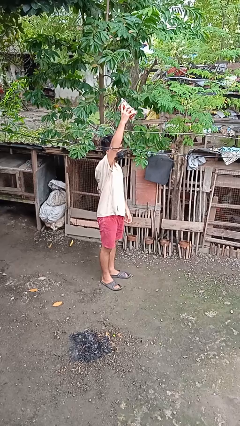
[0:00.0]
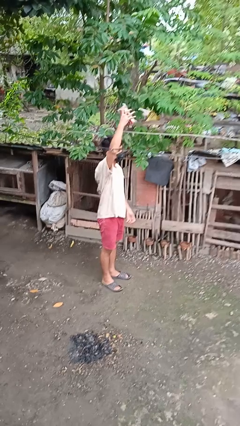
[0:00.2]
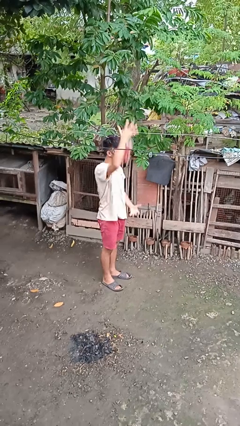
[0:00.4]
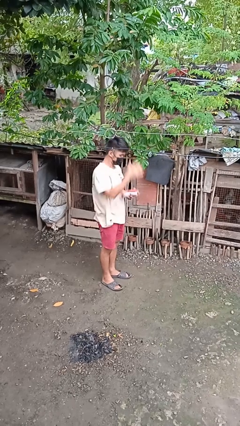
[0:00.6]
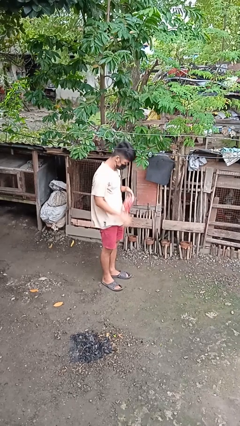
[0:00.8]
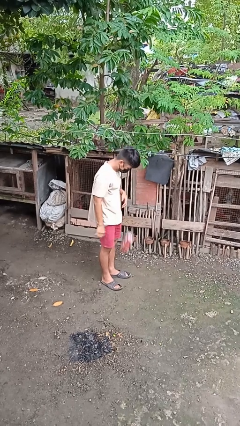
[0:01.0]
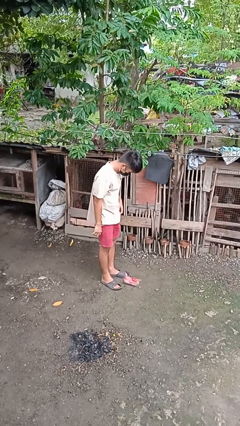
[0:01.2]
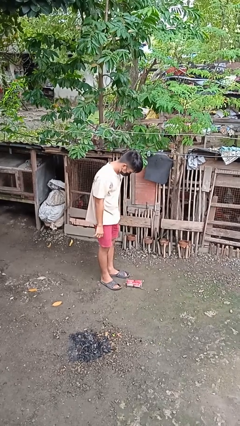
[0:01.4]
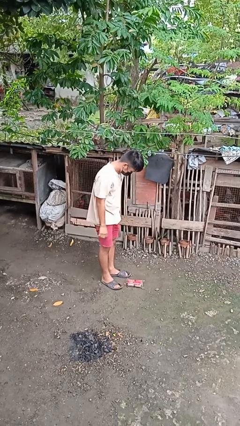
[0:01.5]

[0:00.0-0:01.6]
person drops object

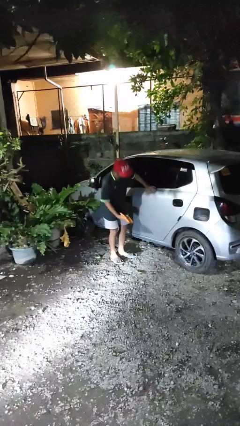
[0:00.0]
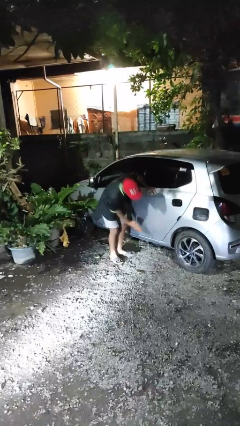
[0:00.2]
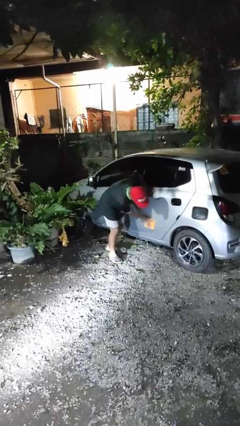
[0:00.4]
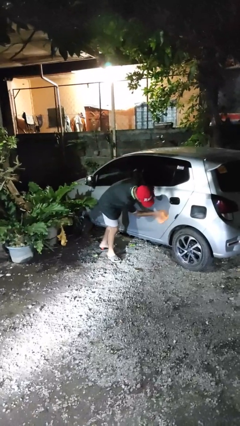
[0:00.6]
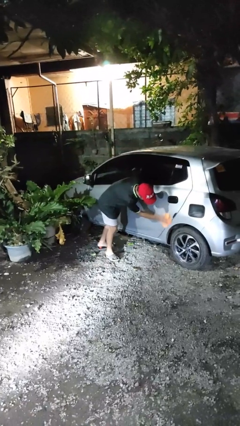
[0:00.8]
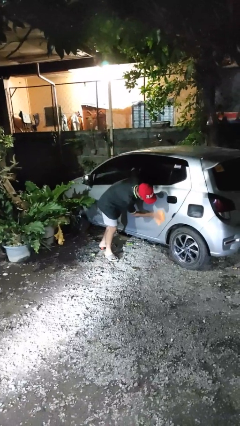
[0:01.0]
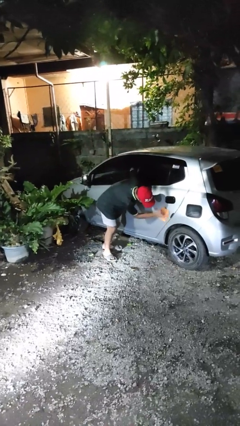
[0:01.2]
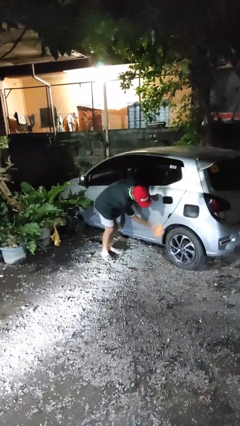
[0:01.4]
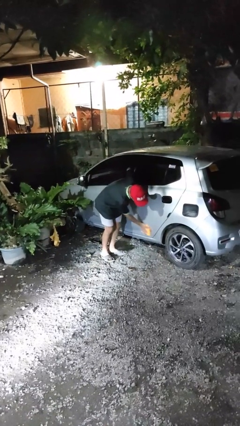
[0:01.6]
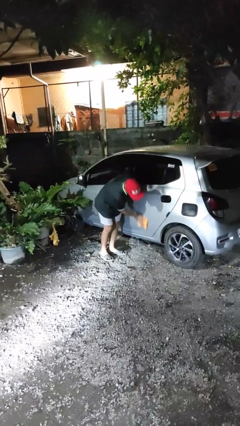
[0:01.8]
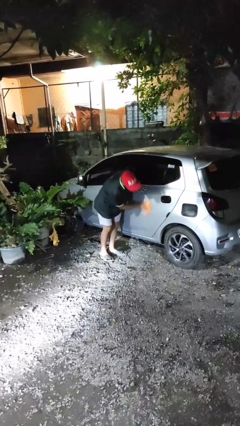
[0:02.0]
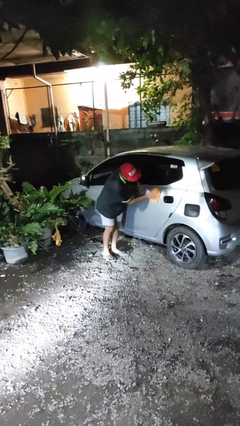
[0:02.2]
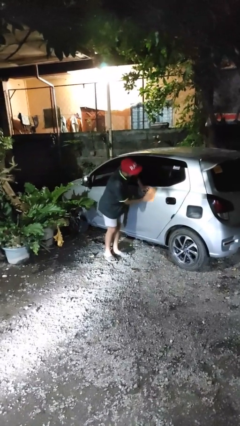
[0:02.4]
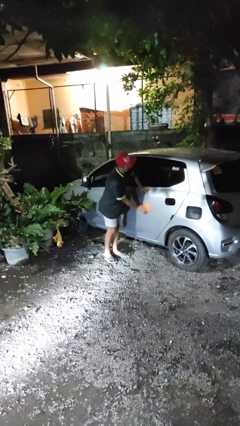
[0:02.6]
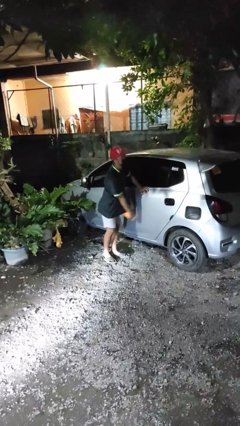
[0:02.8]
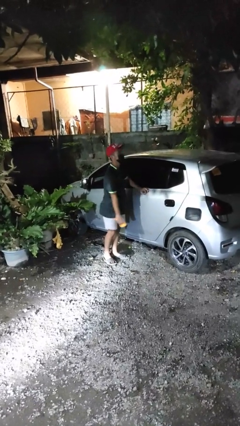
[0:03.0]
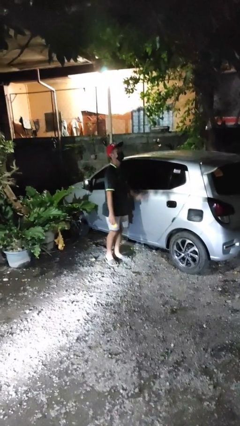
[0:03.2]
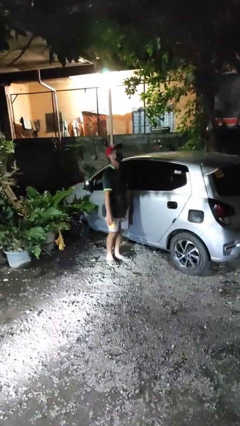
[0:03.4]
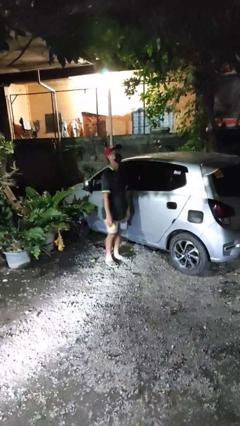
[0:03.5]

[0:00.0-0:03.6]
person polishes car with rag

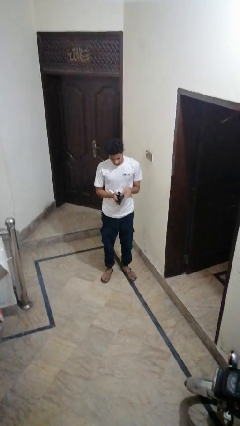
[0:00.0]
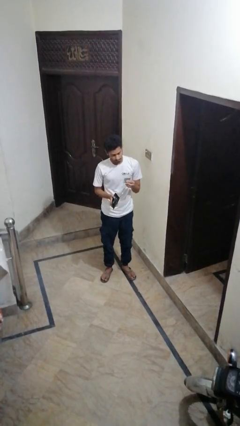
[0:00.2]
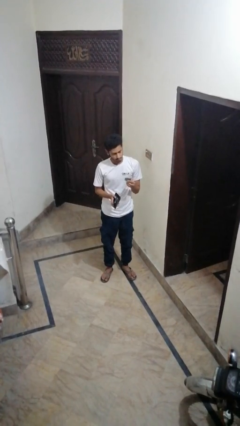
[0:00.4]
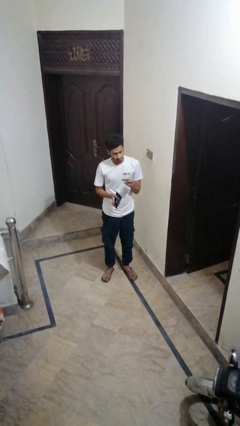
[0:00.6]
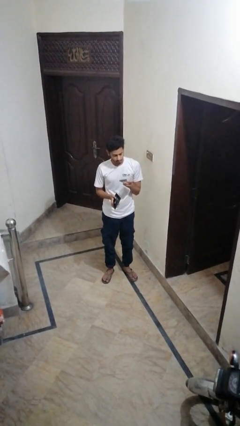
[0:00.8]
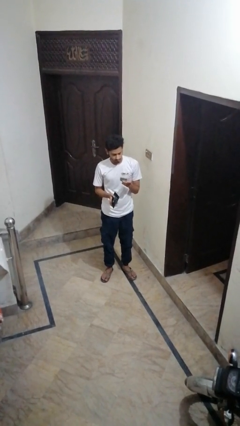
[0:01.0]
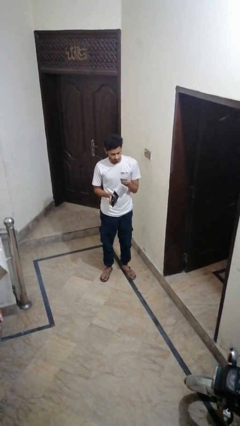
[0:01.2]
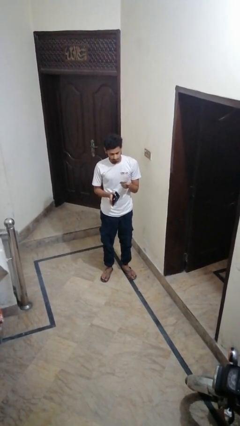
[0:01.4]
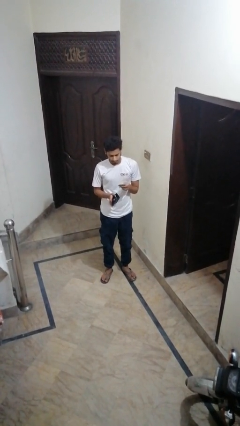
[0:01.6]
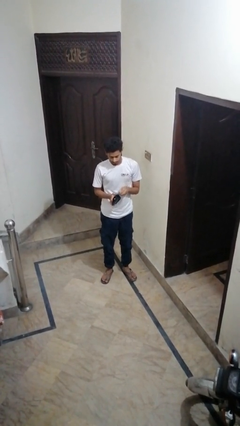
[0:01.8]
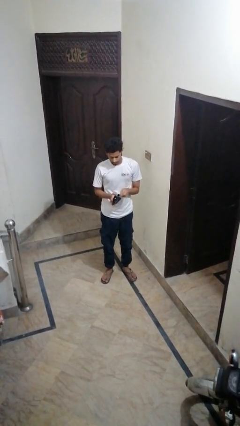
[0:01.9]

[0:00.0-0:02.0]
person takes object from purse

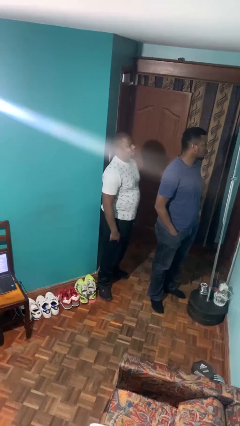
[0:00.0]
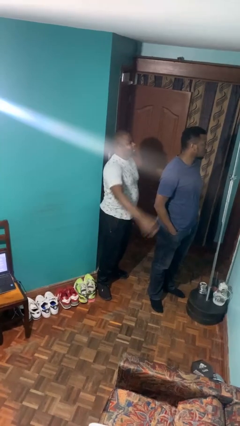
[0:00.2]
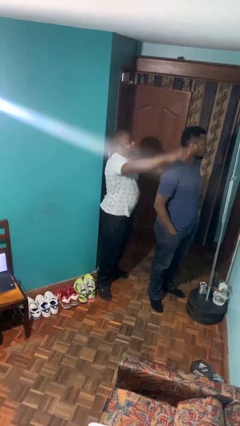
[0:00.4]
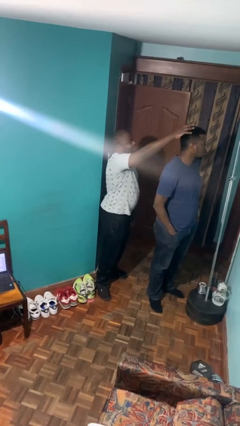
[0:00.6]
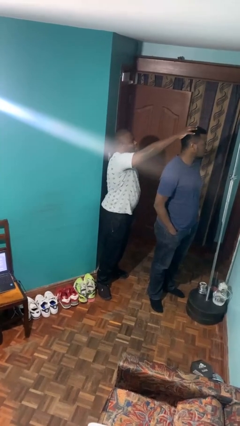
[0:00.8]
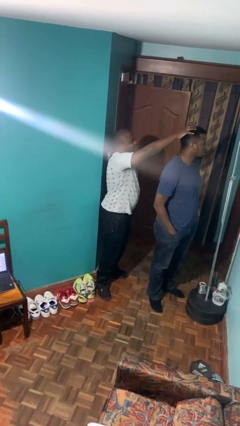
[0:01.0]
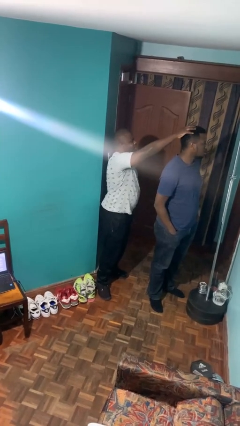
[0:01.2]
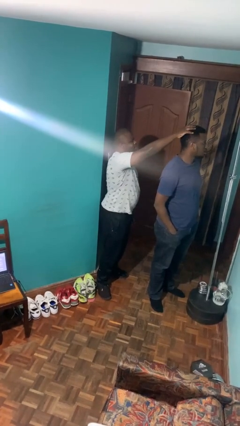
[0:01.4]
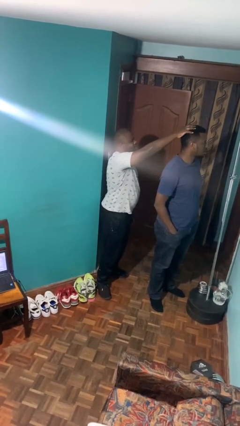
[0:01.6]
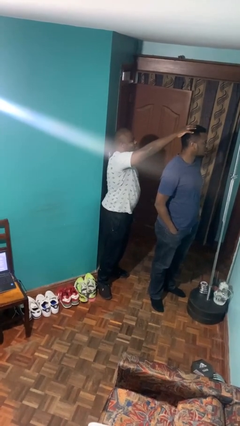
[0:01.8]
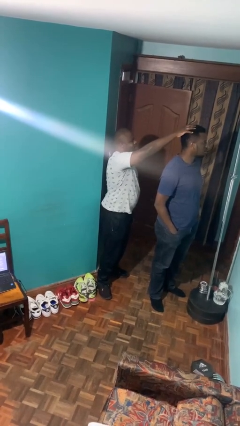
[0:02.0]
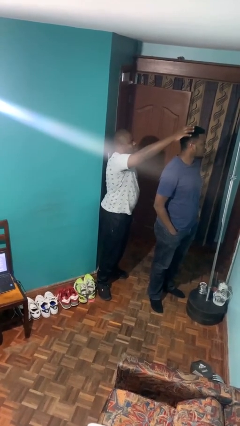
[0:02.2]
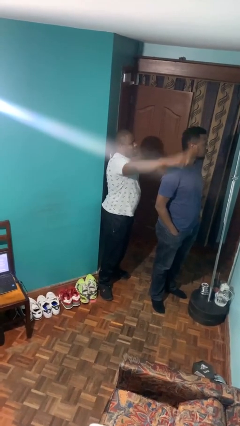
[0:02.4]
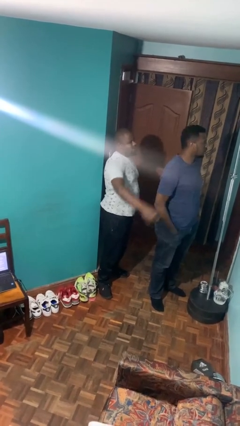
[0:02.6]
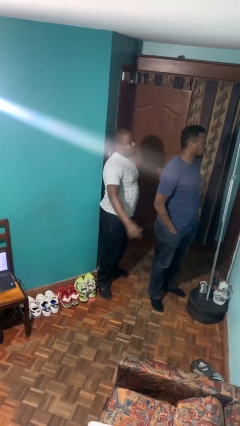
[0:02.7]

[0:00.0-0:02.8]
person grabs person by hair

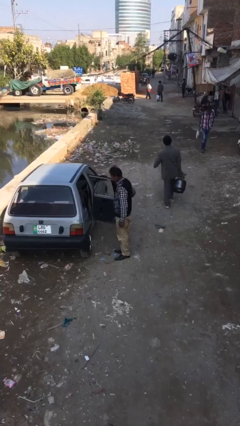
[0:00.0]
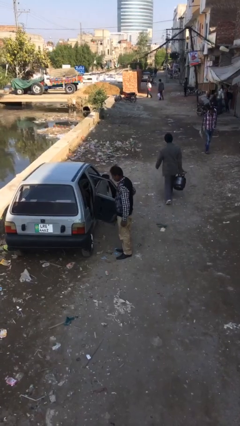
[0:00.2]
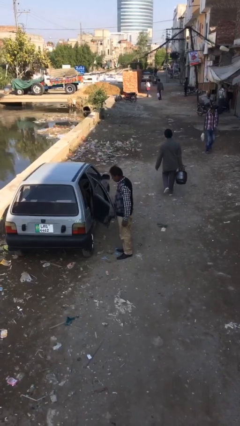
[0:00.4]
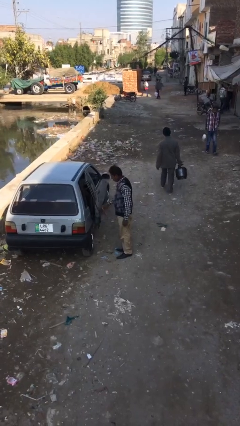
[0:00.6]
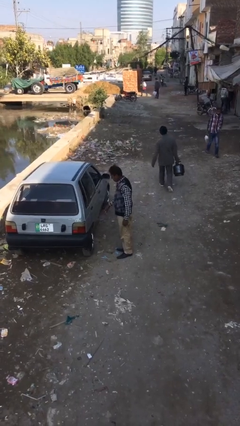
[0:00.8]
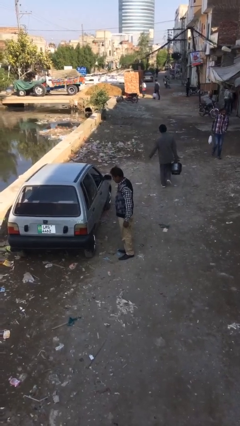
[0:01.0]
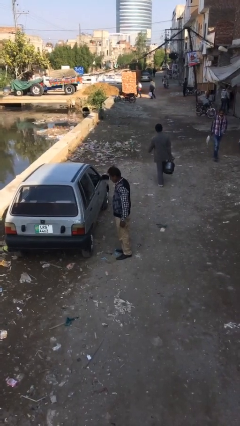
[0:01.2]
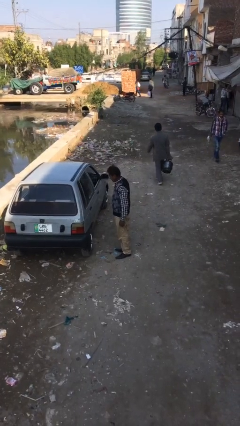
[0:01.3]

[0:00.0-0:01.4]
person closes car door

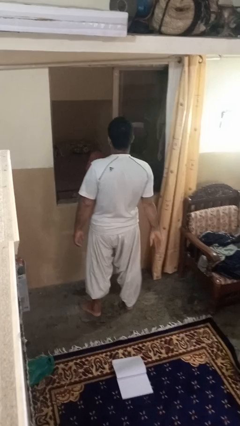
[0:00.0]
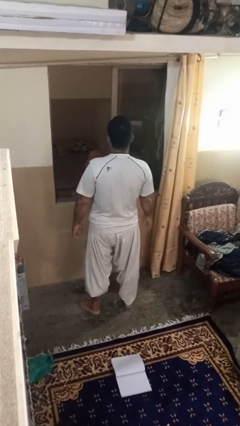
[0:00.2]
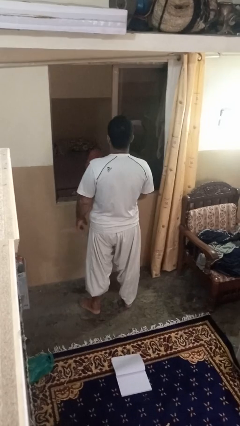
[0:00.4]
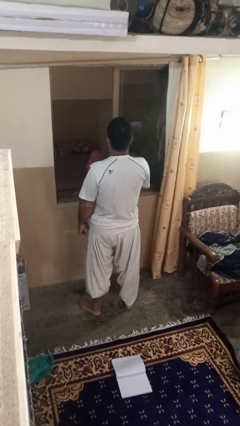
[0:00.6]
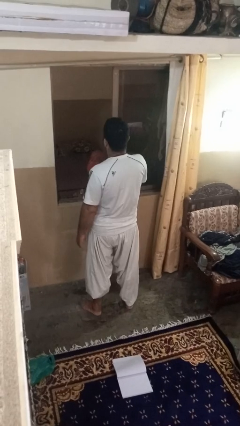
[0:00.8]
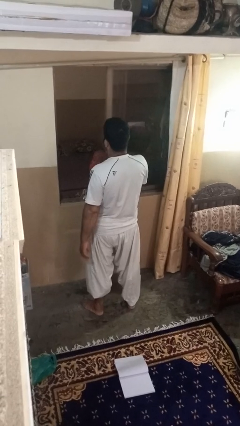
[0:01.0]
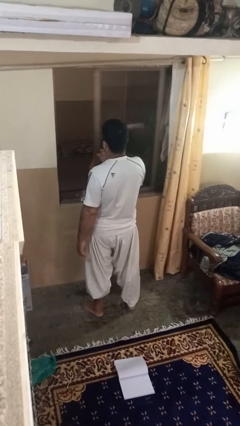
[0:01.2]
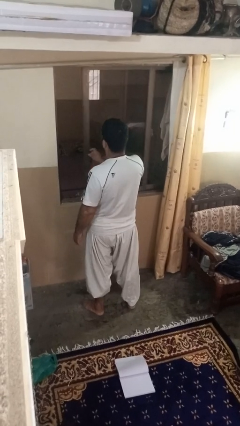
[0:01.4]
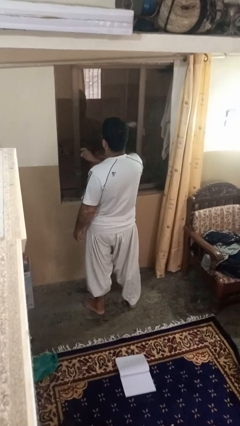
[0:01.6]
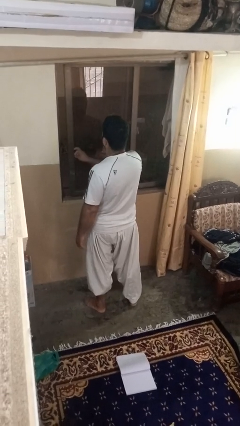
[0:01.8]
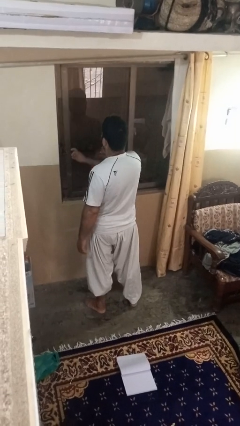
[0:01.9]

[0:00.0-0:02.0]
person closes home window

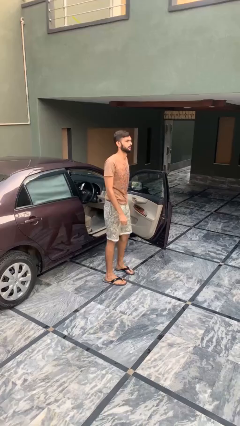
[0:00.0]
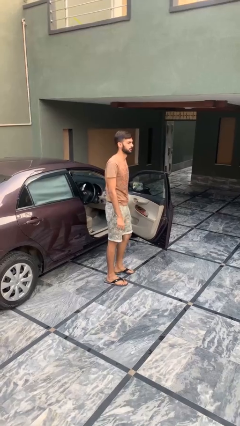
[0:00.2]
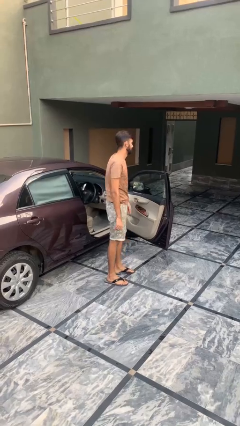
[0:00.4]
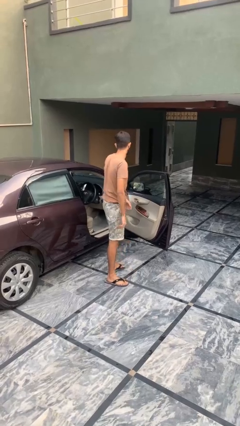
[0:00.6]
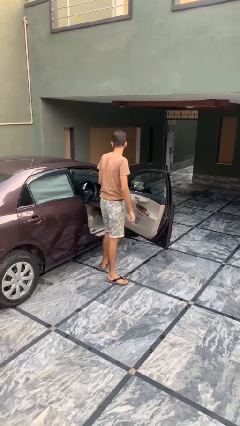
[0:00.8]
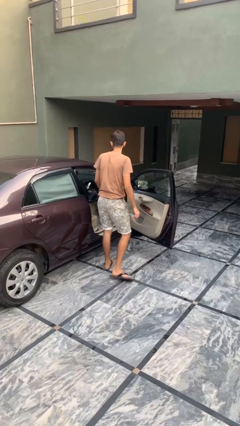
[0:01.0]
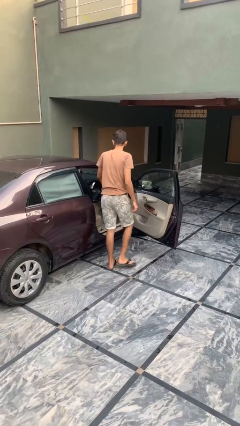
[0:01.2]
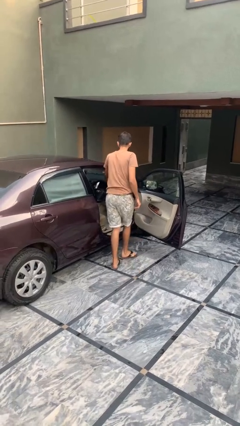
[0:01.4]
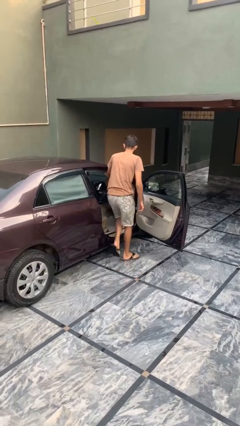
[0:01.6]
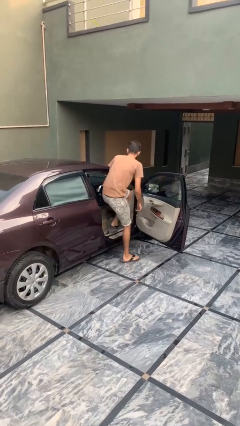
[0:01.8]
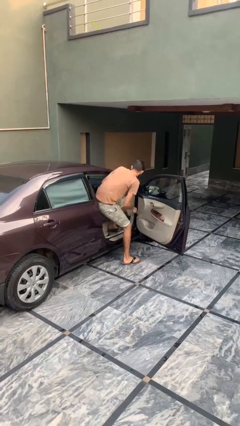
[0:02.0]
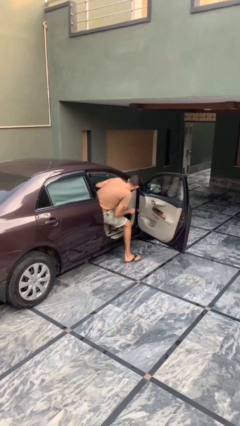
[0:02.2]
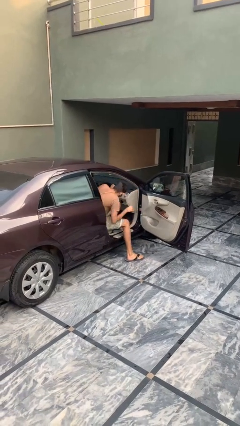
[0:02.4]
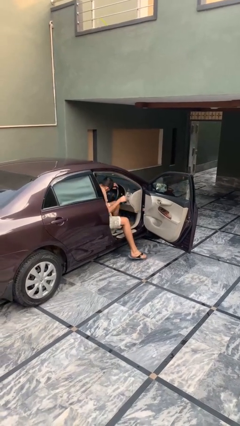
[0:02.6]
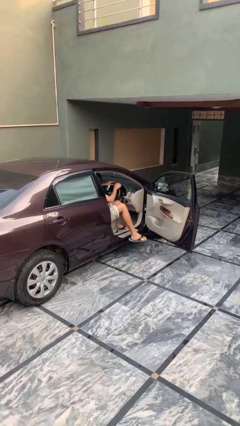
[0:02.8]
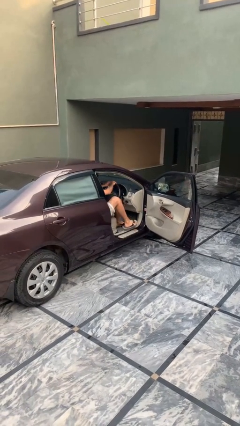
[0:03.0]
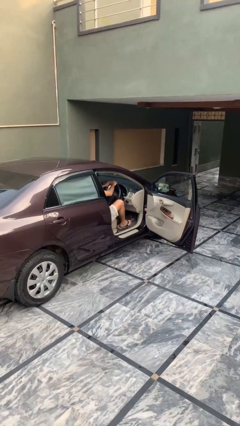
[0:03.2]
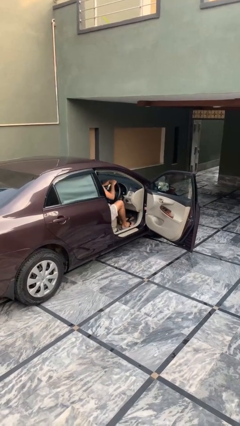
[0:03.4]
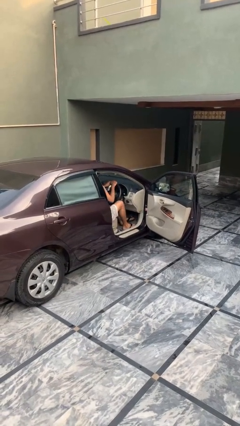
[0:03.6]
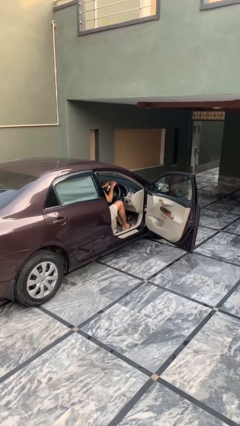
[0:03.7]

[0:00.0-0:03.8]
person enters car
